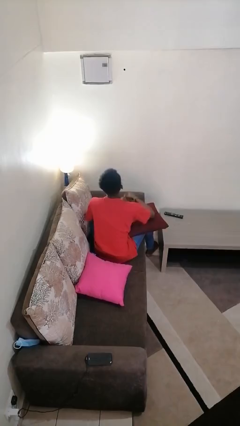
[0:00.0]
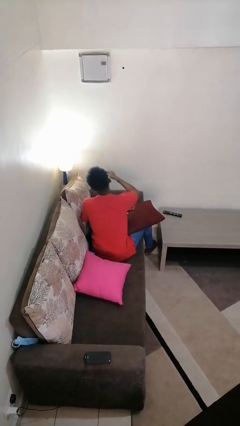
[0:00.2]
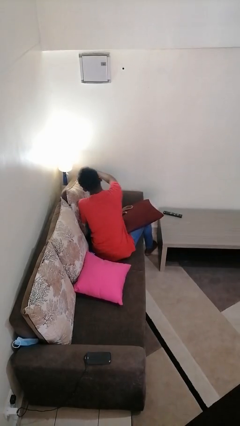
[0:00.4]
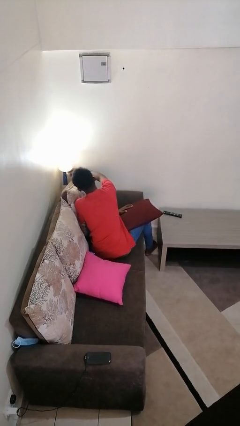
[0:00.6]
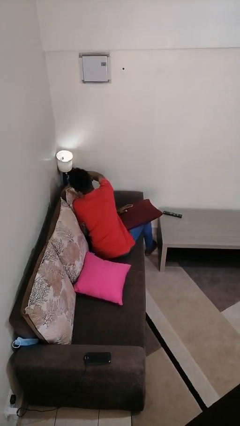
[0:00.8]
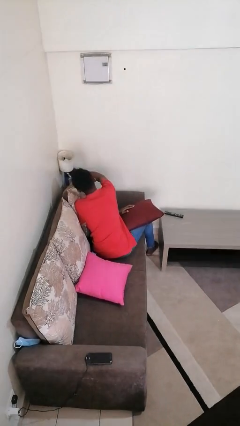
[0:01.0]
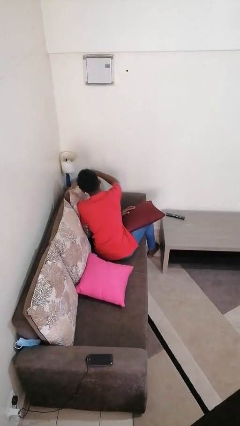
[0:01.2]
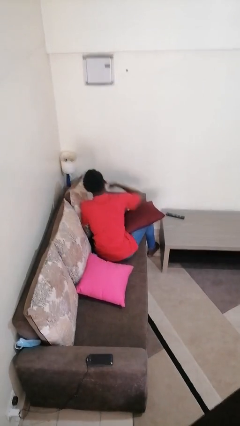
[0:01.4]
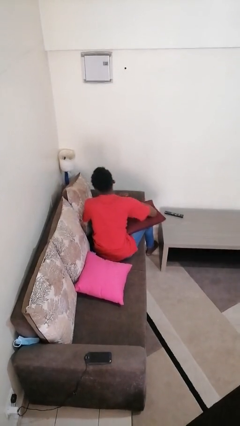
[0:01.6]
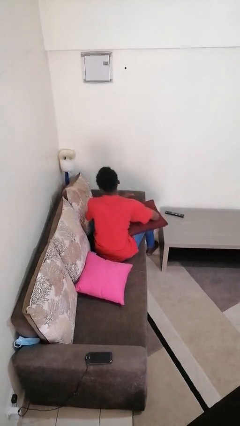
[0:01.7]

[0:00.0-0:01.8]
person turns off lamp

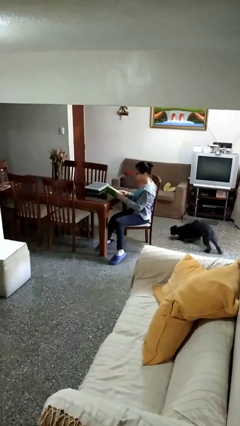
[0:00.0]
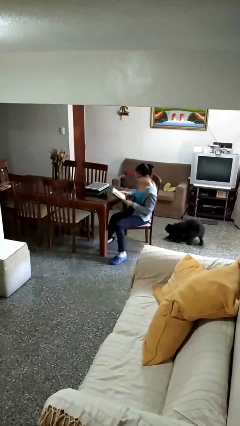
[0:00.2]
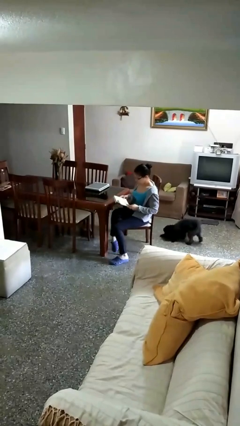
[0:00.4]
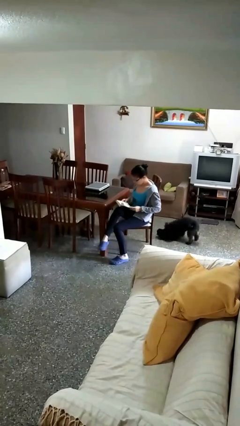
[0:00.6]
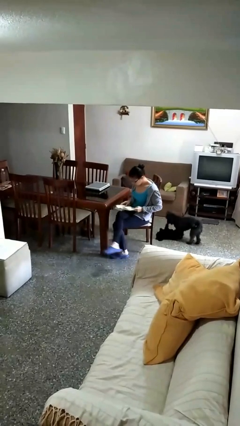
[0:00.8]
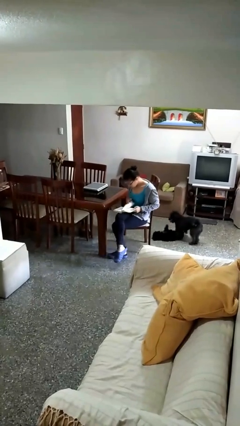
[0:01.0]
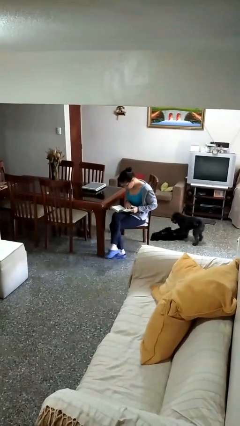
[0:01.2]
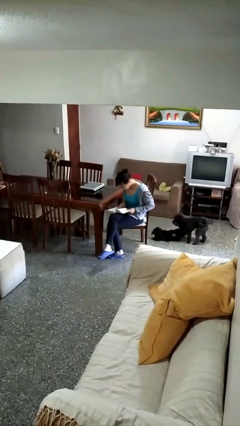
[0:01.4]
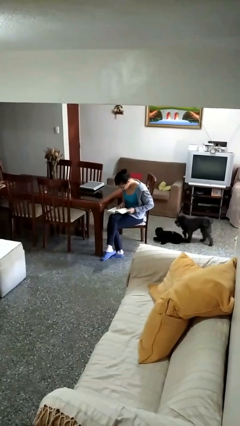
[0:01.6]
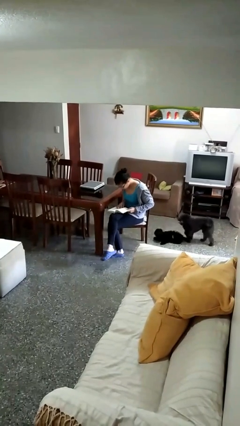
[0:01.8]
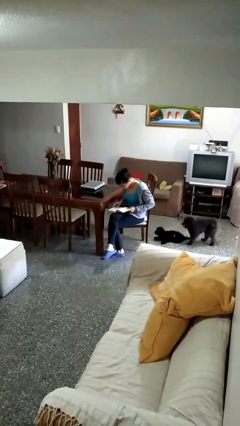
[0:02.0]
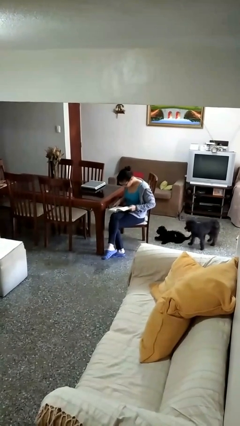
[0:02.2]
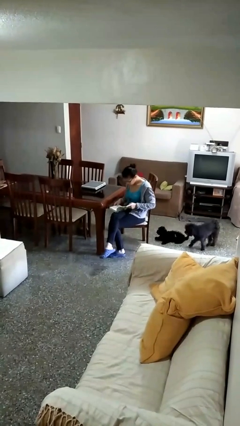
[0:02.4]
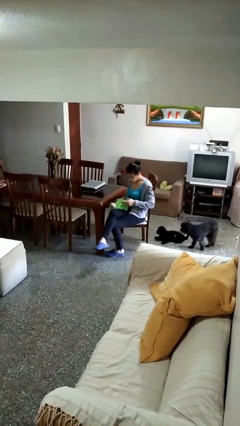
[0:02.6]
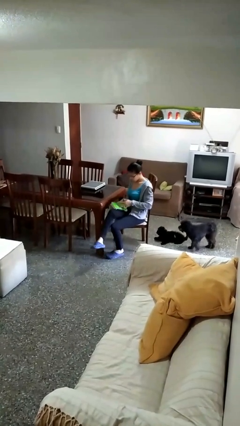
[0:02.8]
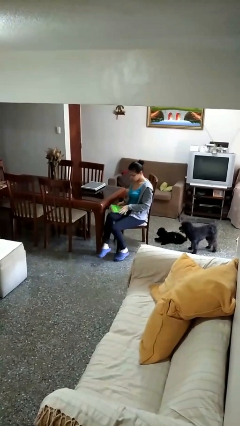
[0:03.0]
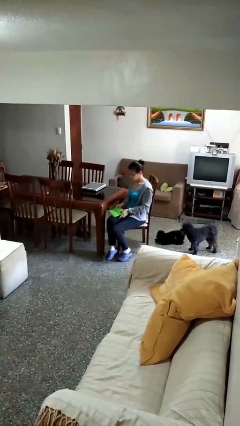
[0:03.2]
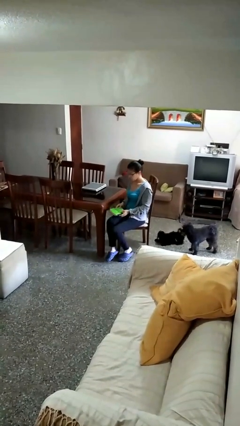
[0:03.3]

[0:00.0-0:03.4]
person reads document

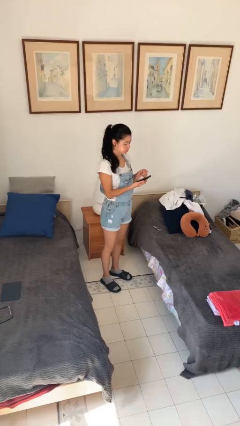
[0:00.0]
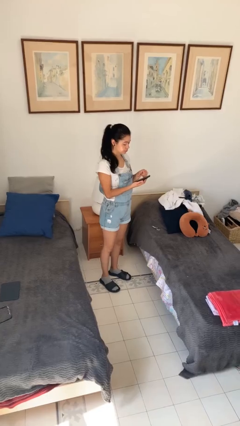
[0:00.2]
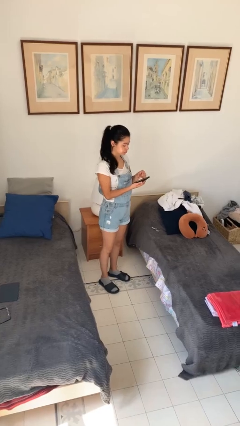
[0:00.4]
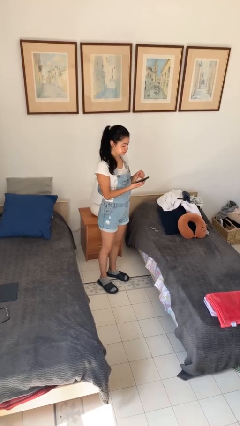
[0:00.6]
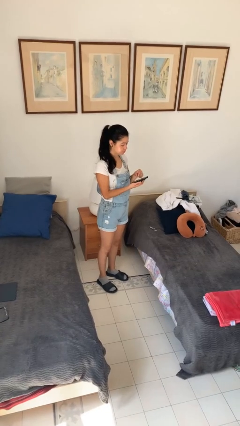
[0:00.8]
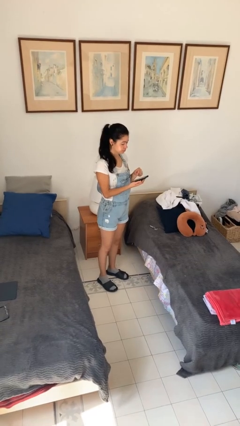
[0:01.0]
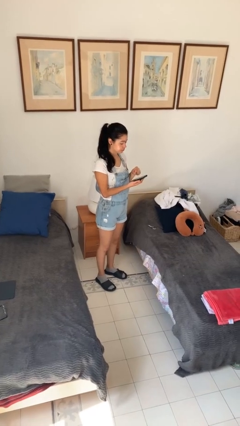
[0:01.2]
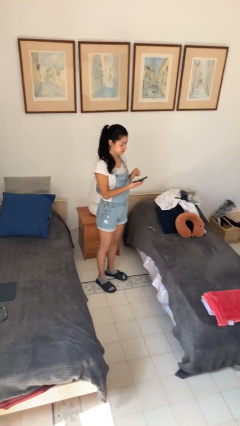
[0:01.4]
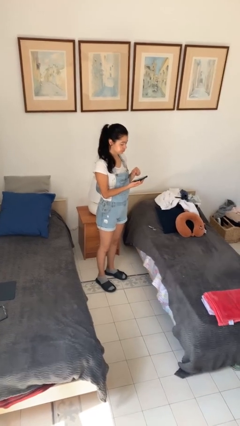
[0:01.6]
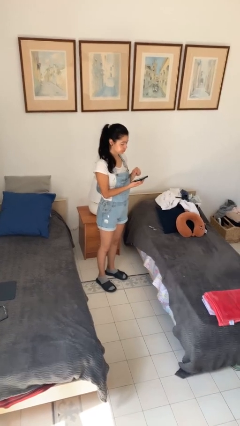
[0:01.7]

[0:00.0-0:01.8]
person gestures zoom in

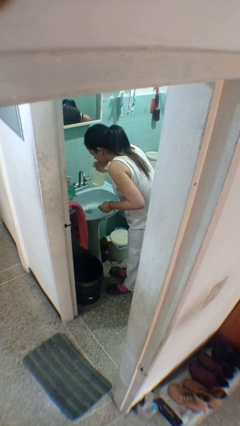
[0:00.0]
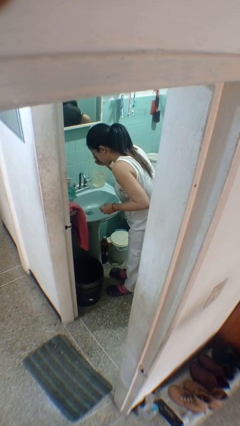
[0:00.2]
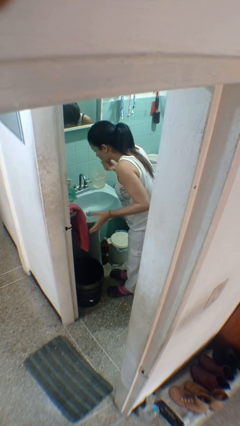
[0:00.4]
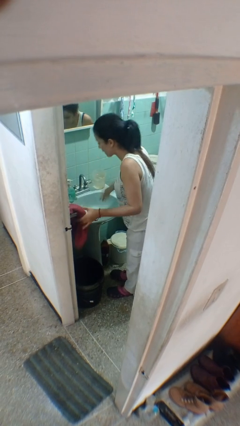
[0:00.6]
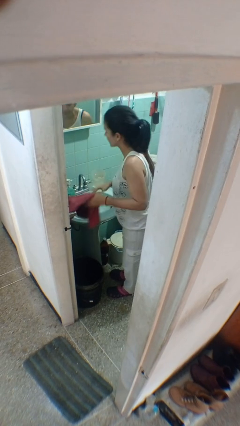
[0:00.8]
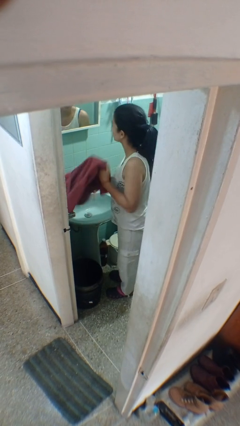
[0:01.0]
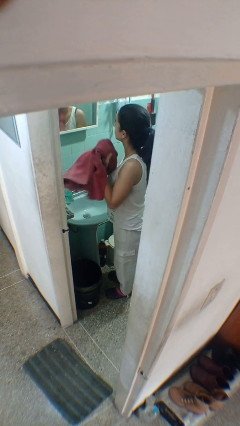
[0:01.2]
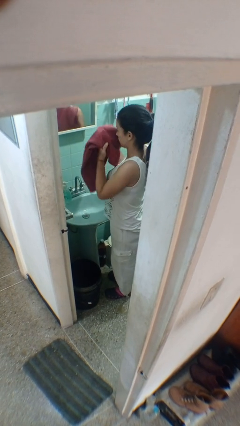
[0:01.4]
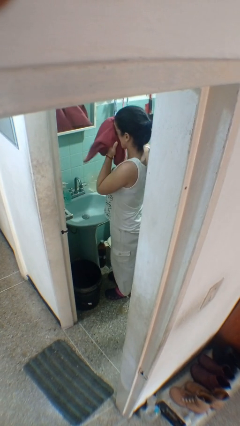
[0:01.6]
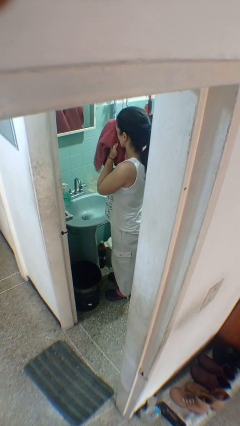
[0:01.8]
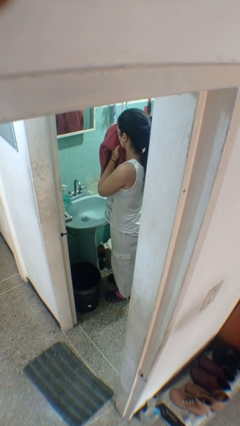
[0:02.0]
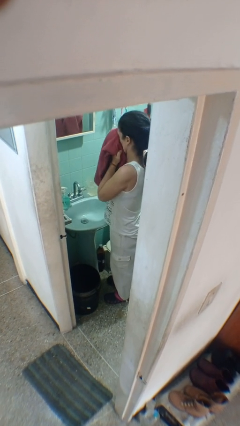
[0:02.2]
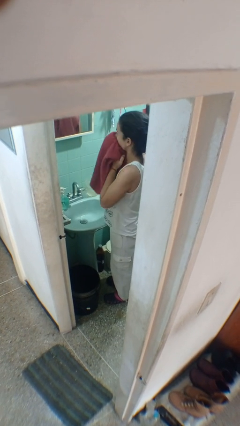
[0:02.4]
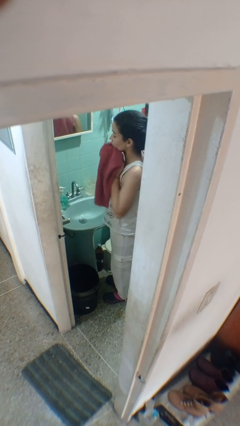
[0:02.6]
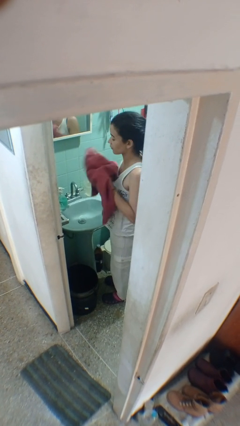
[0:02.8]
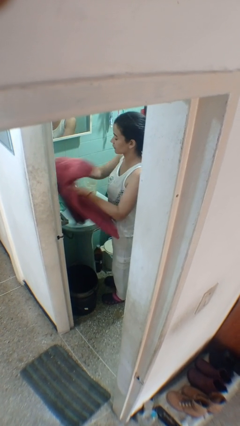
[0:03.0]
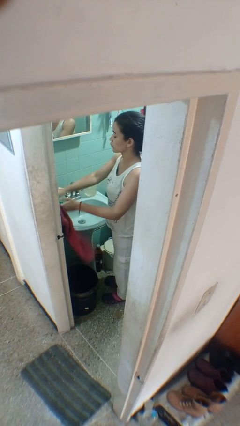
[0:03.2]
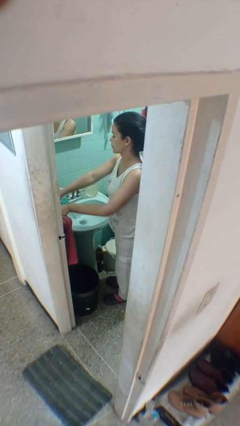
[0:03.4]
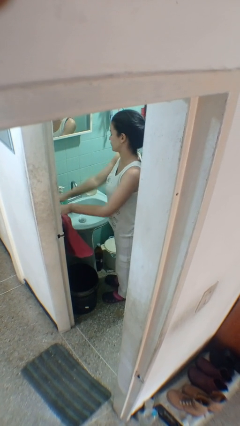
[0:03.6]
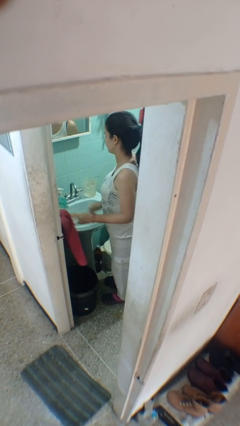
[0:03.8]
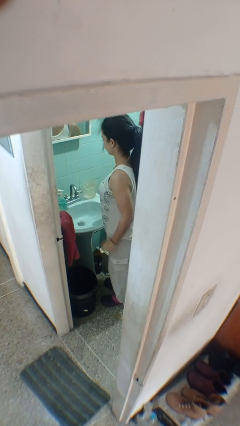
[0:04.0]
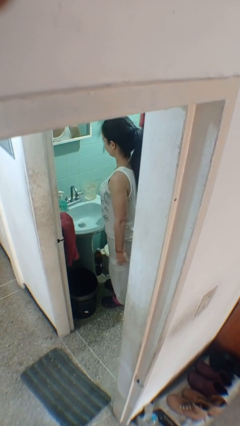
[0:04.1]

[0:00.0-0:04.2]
person dries face with towel

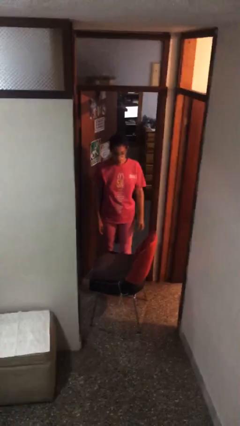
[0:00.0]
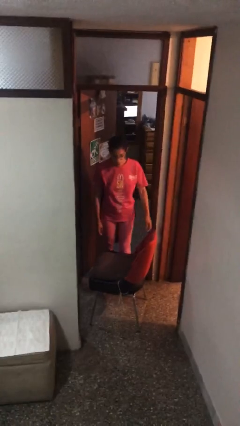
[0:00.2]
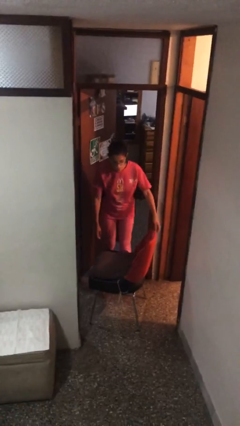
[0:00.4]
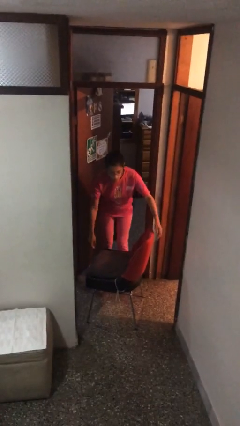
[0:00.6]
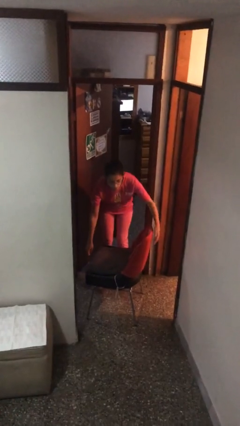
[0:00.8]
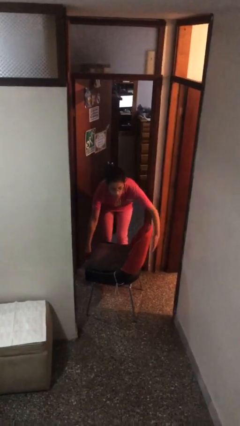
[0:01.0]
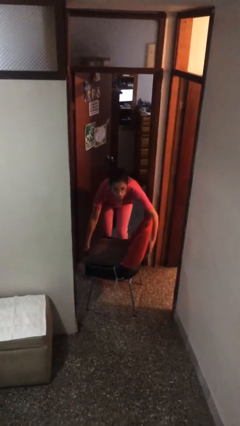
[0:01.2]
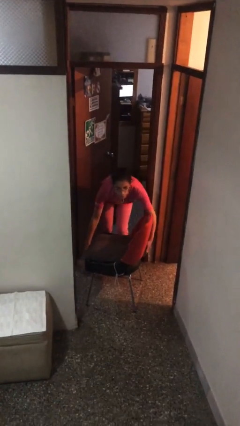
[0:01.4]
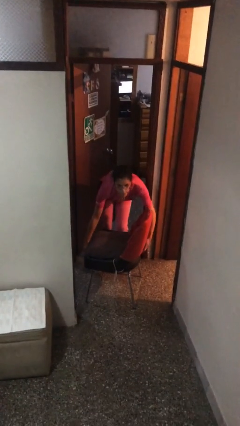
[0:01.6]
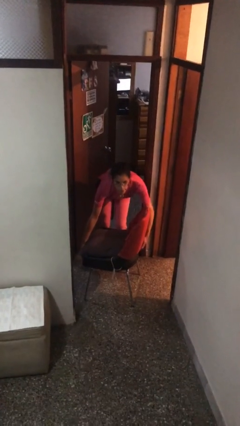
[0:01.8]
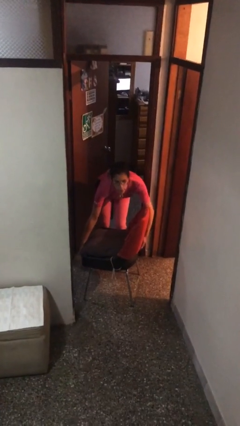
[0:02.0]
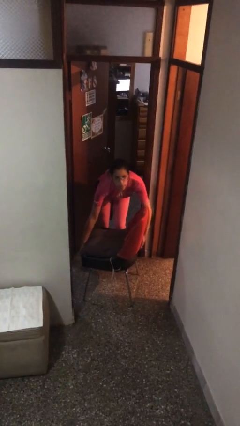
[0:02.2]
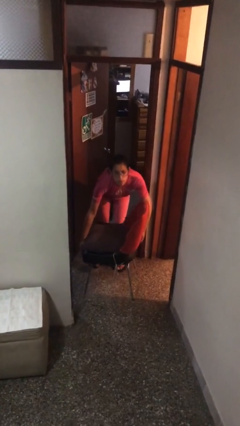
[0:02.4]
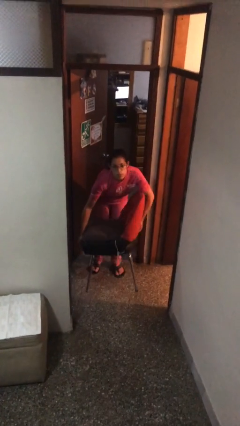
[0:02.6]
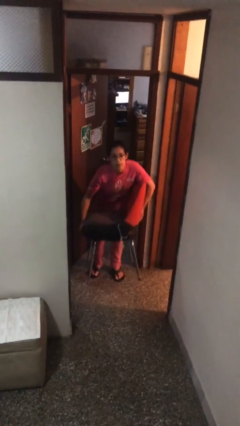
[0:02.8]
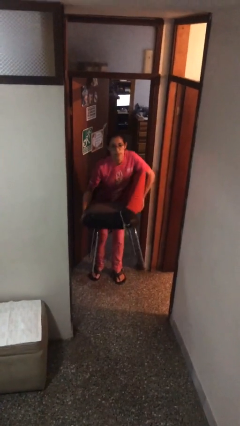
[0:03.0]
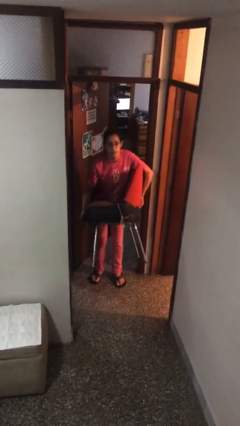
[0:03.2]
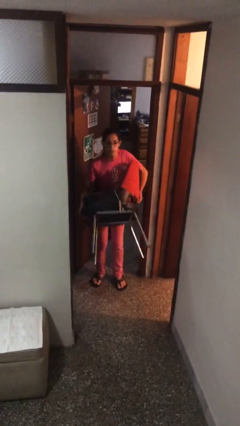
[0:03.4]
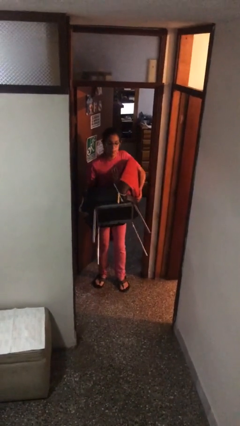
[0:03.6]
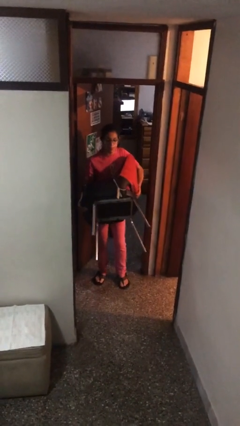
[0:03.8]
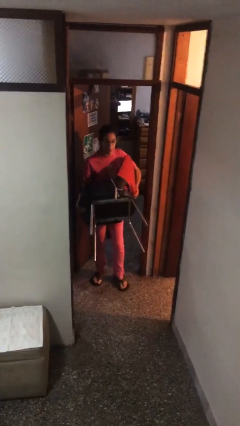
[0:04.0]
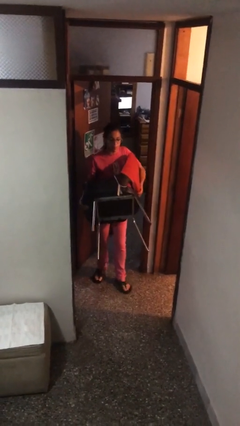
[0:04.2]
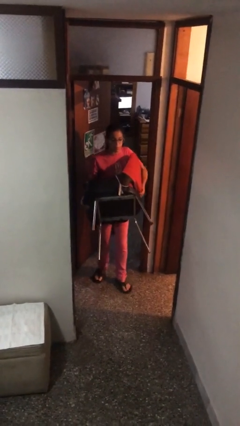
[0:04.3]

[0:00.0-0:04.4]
person picks up object from floor

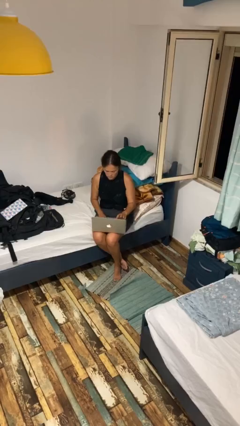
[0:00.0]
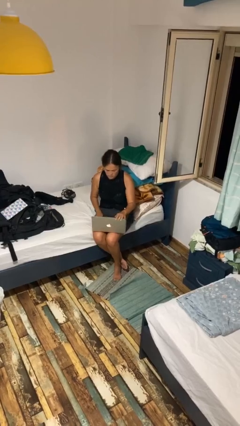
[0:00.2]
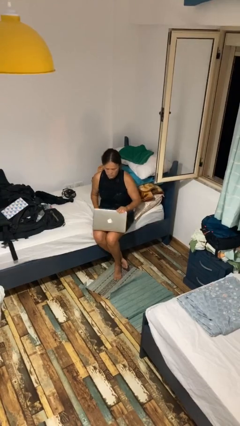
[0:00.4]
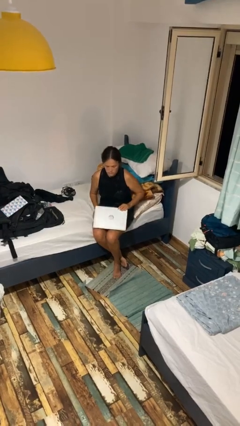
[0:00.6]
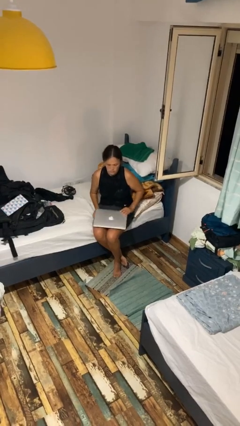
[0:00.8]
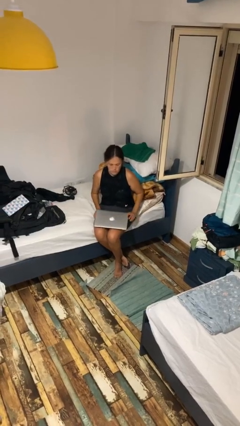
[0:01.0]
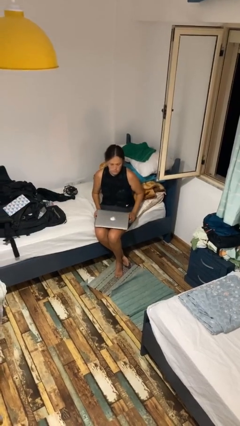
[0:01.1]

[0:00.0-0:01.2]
person closes laptop

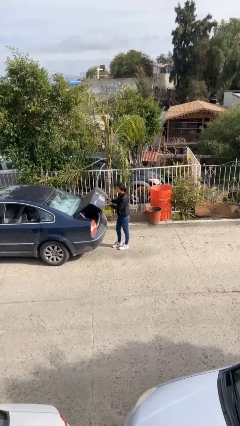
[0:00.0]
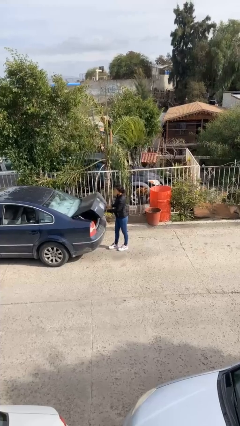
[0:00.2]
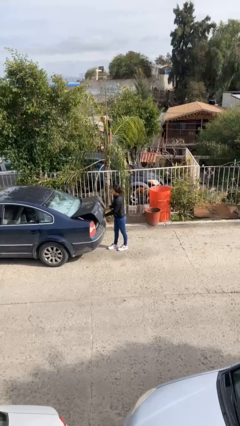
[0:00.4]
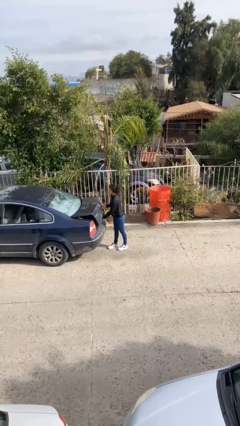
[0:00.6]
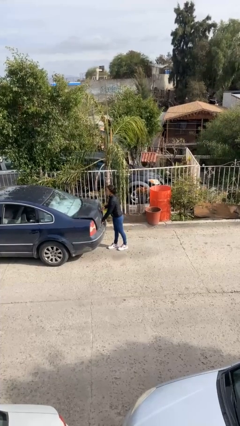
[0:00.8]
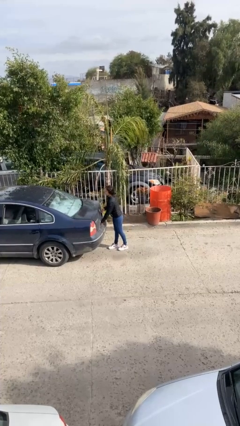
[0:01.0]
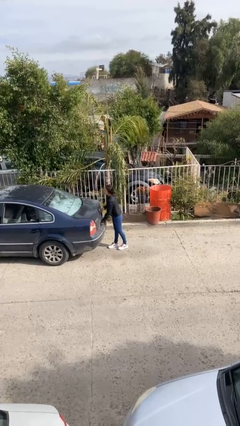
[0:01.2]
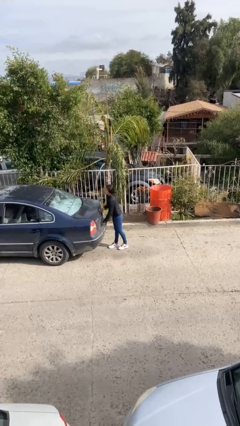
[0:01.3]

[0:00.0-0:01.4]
person closes car trunk
